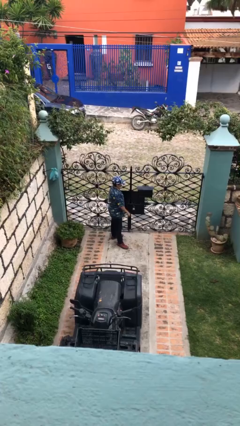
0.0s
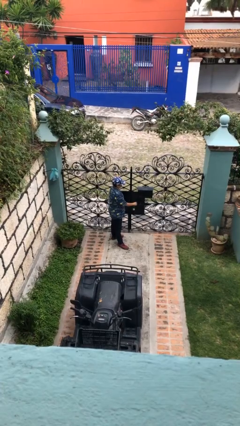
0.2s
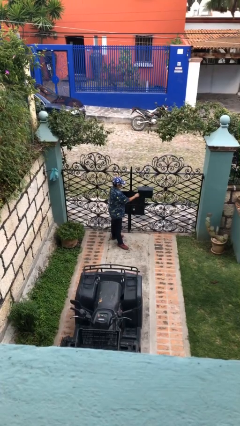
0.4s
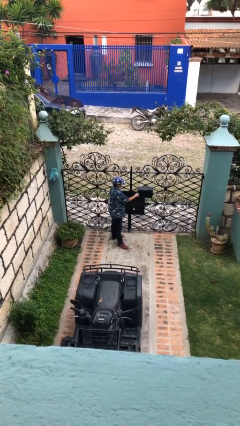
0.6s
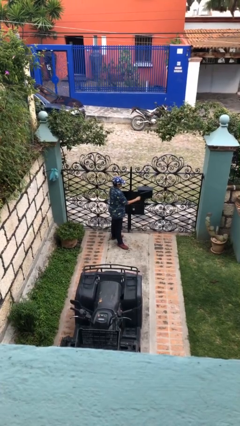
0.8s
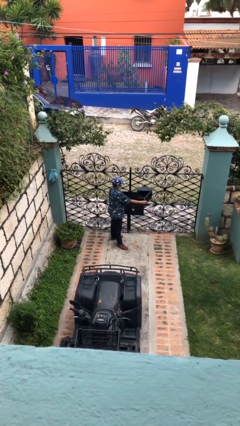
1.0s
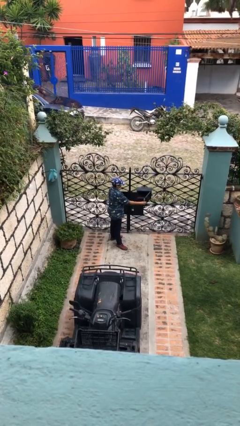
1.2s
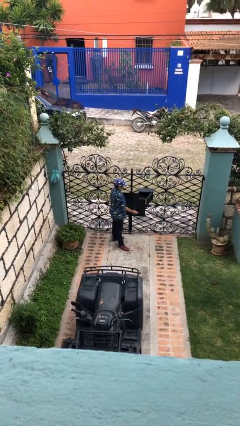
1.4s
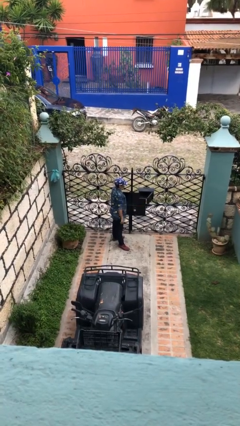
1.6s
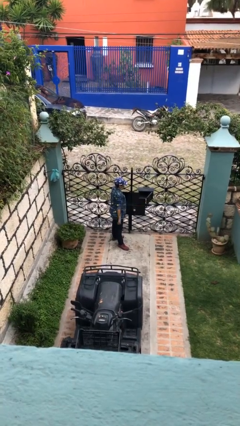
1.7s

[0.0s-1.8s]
person opens mailbox

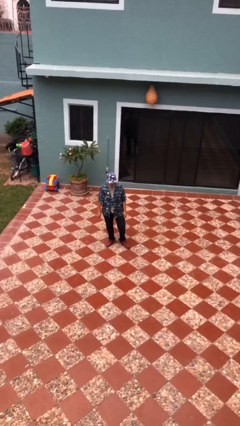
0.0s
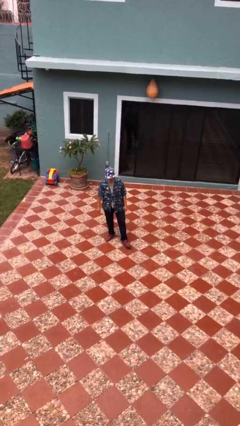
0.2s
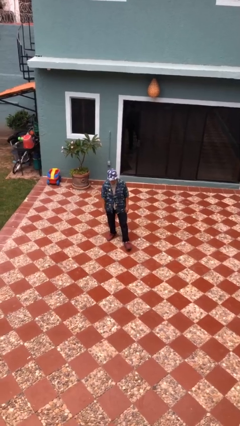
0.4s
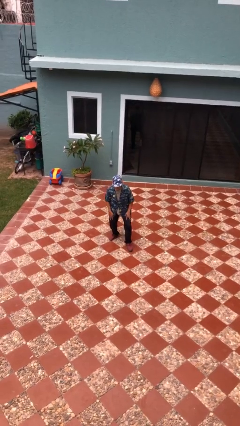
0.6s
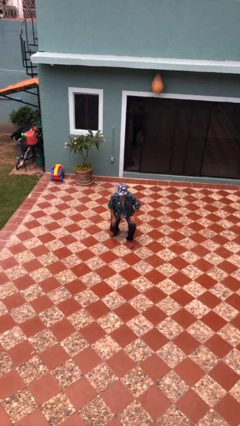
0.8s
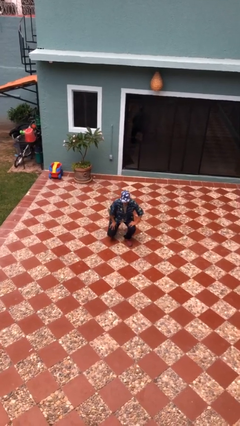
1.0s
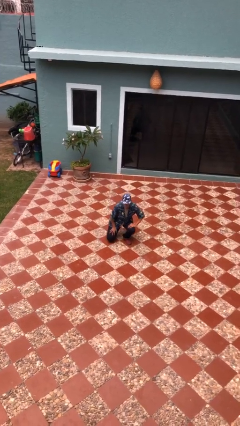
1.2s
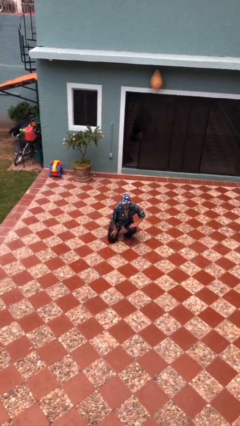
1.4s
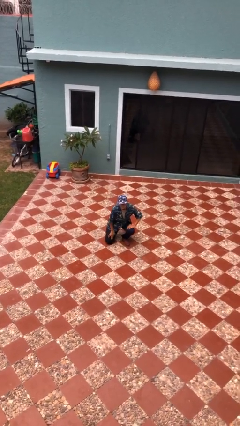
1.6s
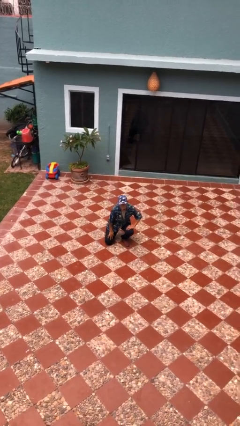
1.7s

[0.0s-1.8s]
person kneels

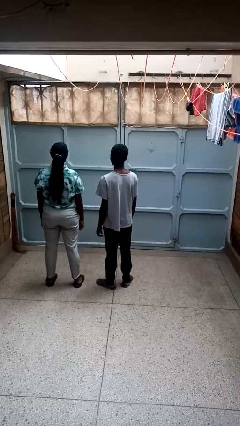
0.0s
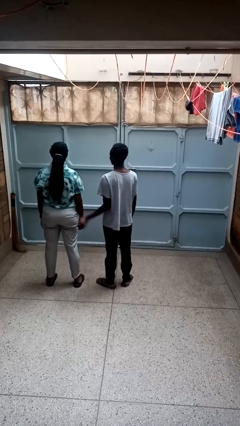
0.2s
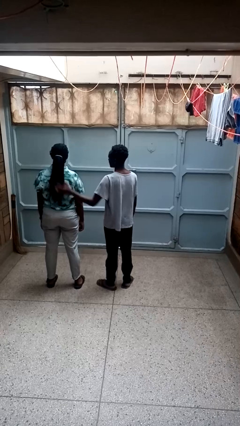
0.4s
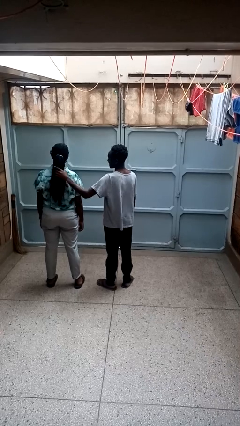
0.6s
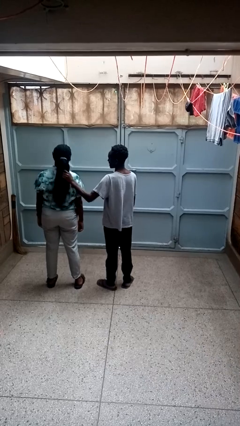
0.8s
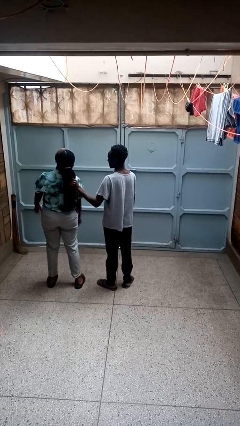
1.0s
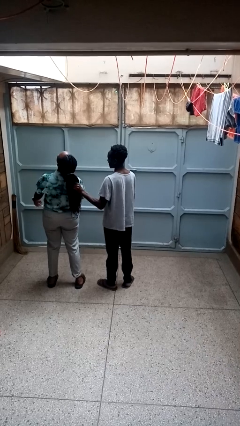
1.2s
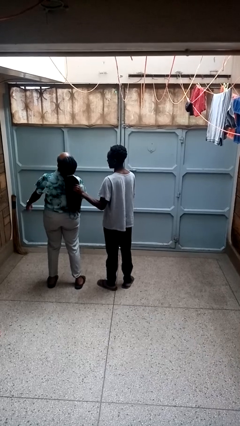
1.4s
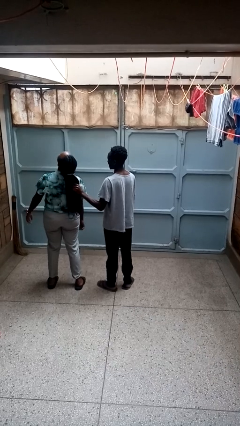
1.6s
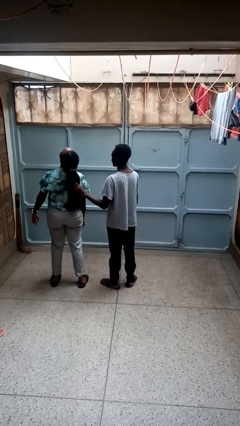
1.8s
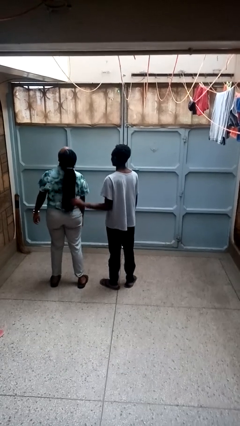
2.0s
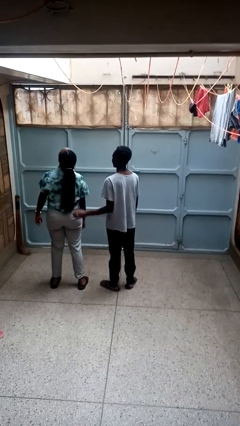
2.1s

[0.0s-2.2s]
person grabs person by hair

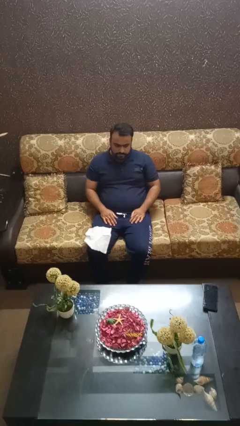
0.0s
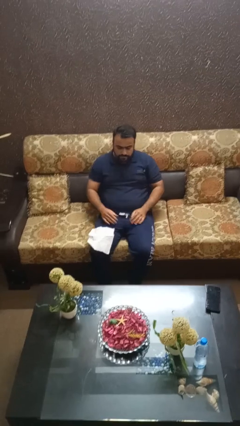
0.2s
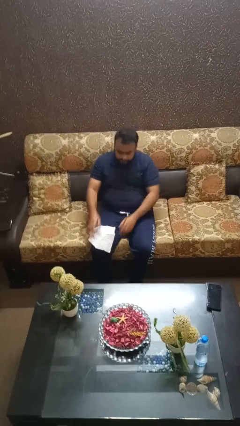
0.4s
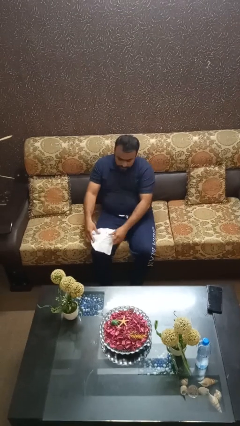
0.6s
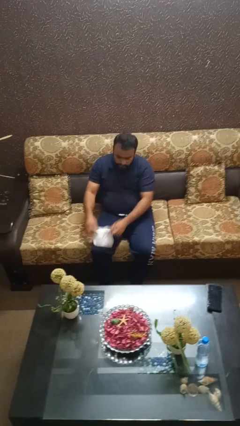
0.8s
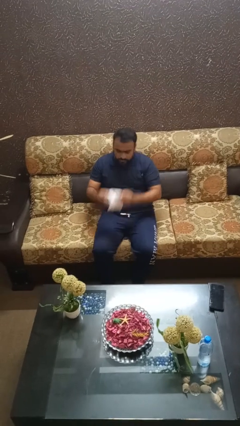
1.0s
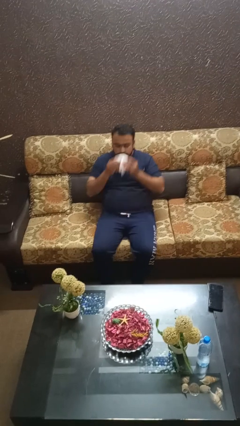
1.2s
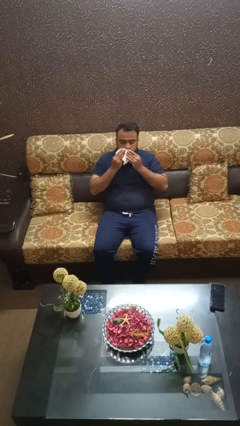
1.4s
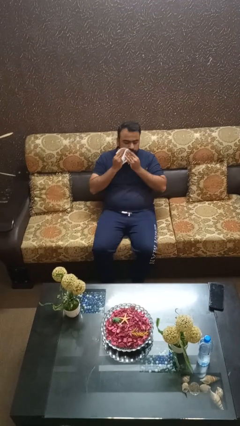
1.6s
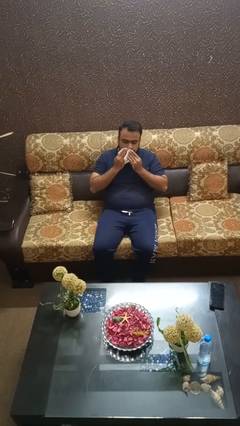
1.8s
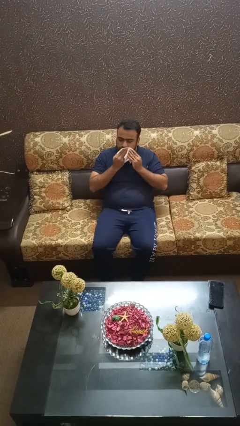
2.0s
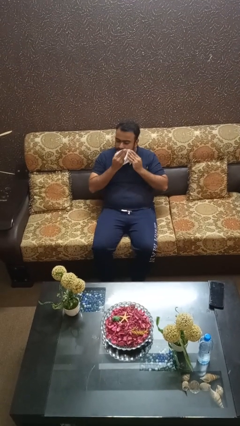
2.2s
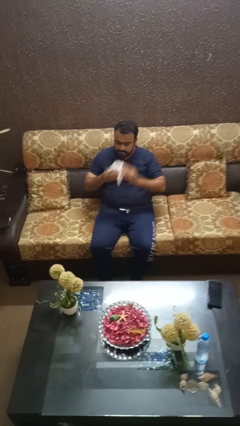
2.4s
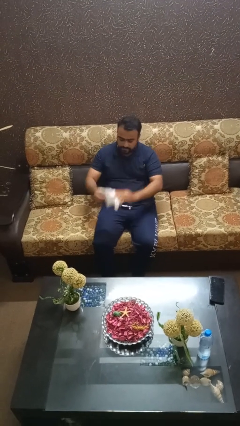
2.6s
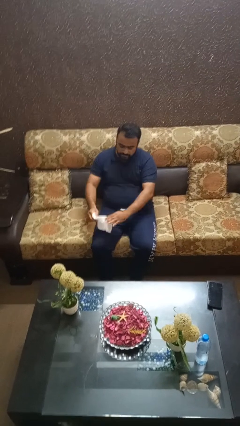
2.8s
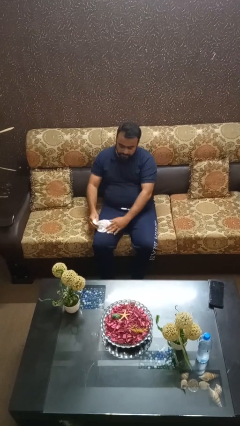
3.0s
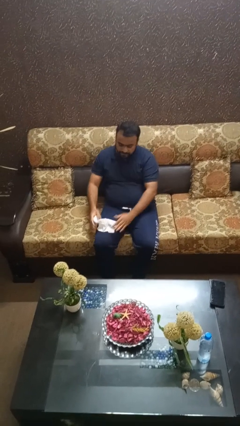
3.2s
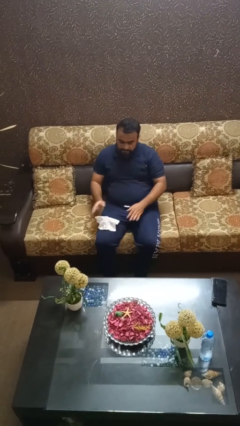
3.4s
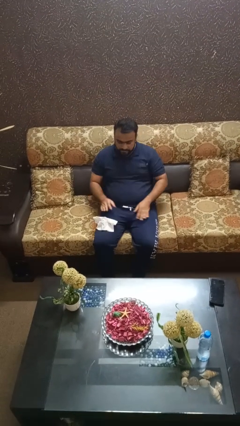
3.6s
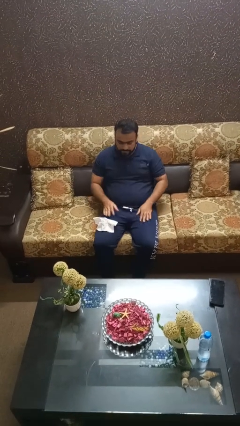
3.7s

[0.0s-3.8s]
person wipes mouth with napkin

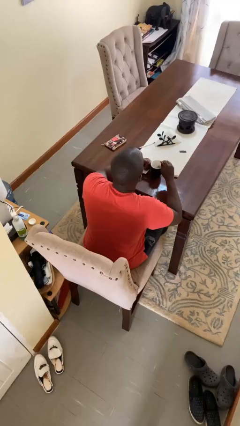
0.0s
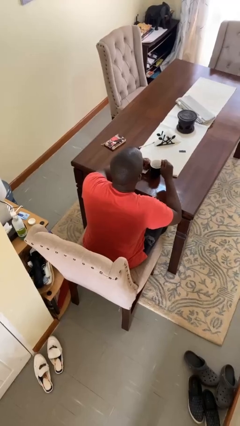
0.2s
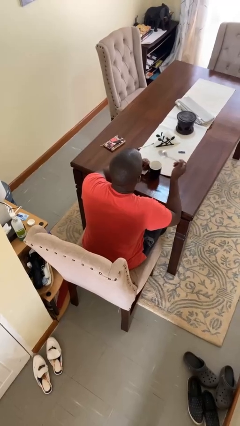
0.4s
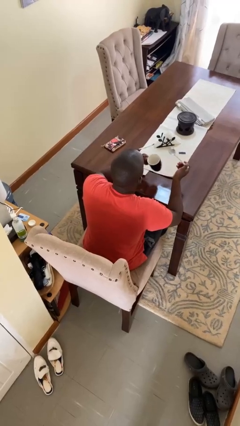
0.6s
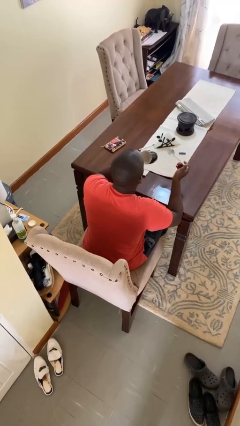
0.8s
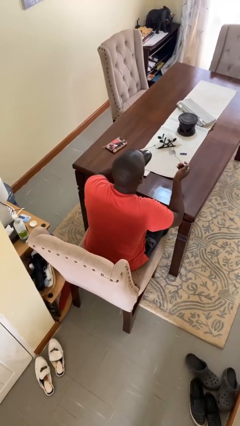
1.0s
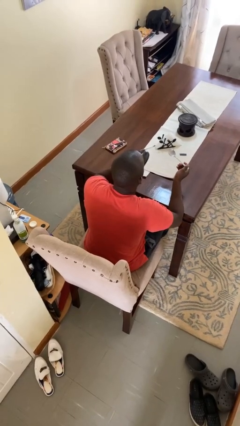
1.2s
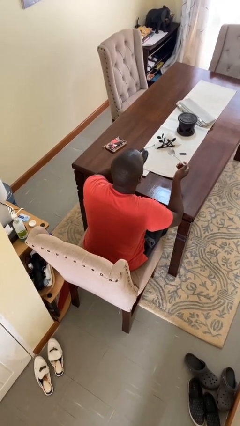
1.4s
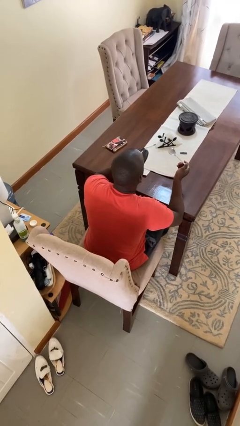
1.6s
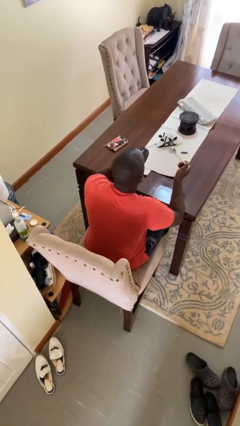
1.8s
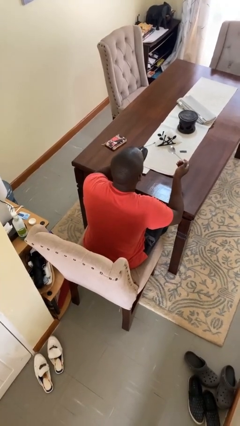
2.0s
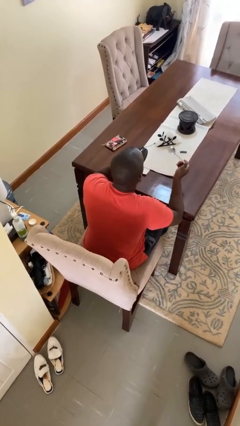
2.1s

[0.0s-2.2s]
person drinks from mug

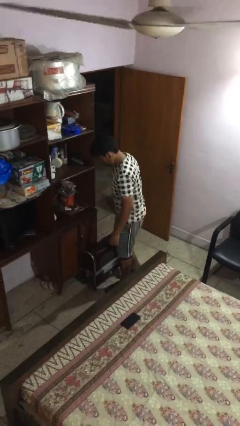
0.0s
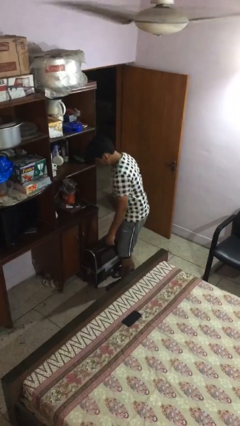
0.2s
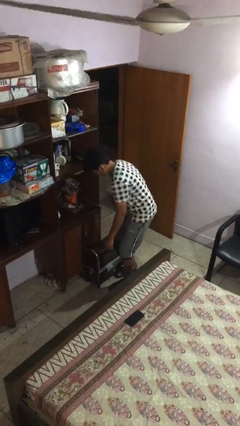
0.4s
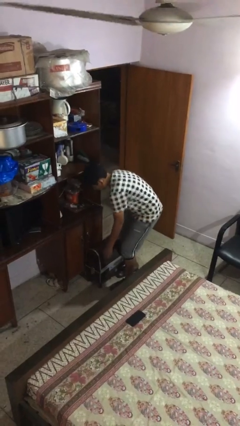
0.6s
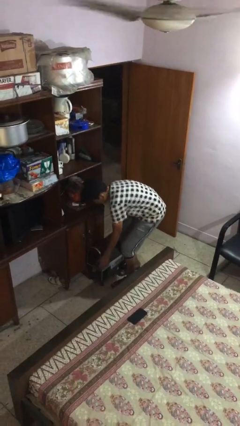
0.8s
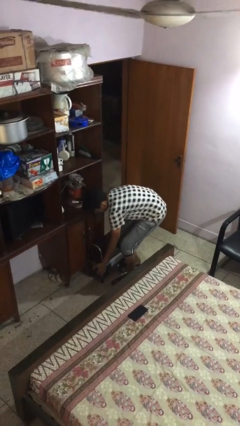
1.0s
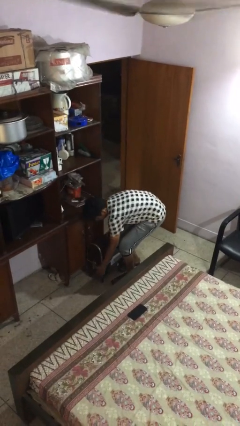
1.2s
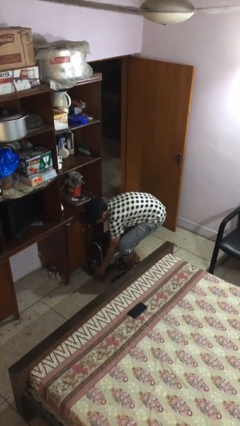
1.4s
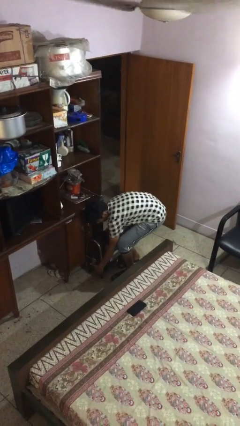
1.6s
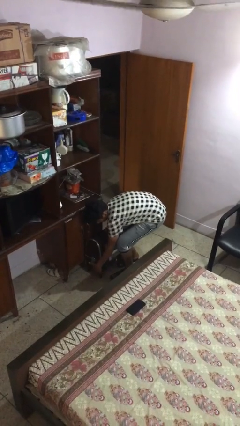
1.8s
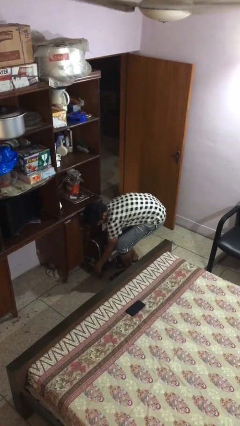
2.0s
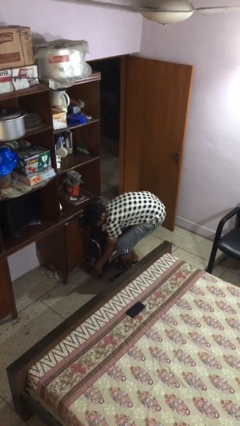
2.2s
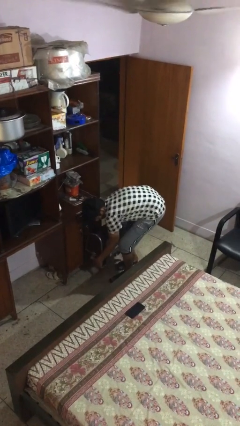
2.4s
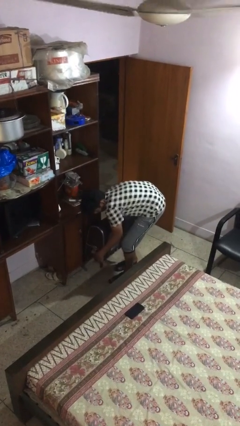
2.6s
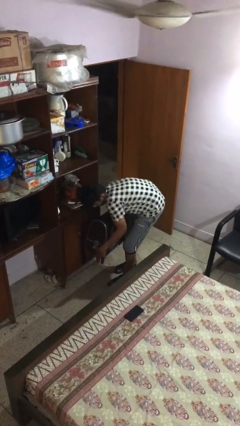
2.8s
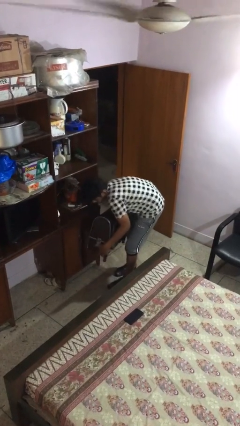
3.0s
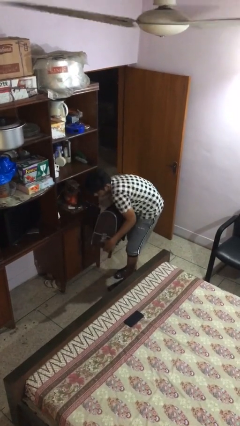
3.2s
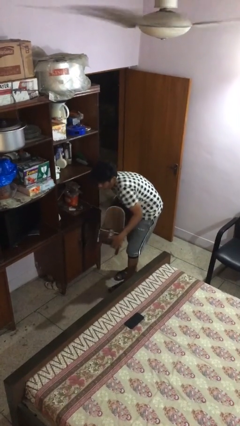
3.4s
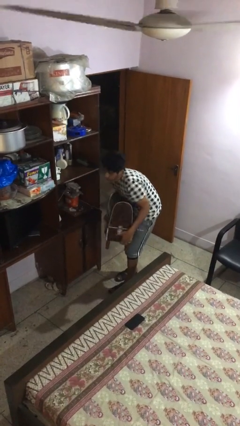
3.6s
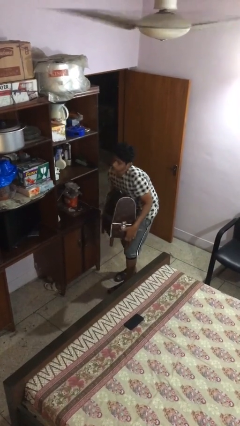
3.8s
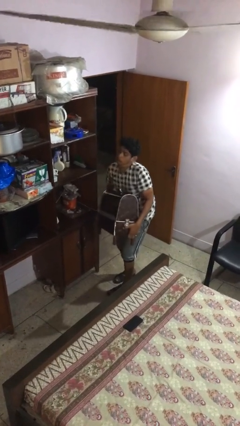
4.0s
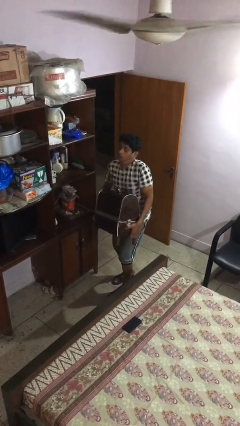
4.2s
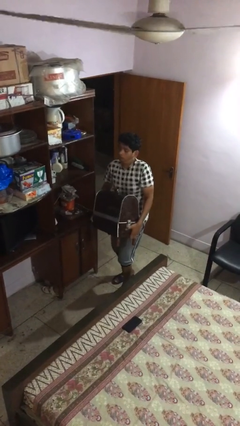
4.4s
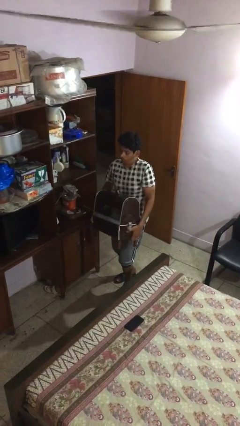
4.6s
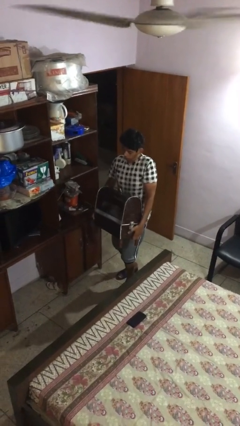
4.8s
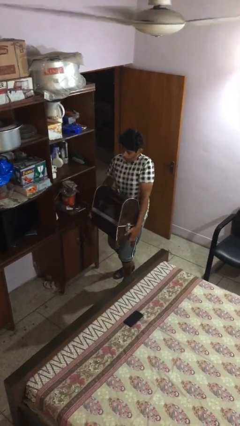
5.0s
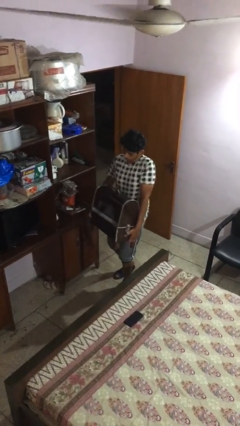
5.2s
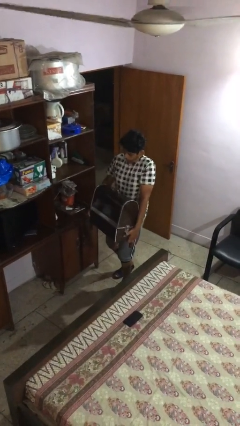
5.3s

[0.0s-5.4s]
person picks up object from floor

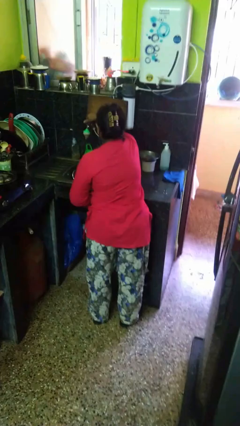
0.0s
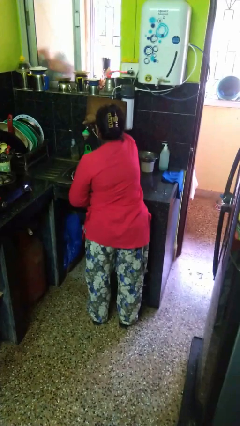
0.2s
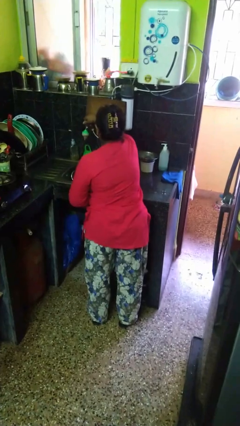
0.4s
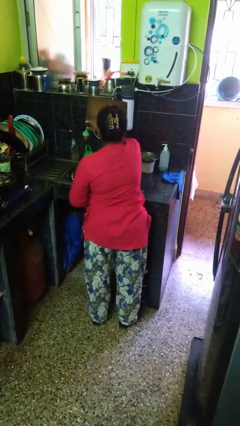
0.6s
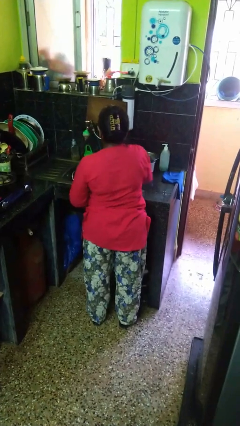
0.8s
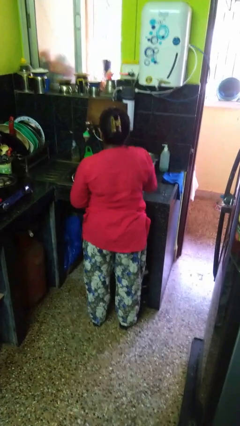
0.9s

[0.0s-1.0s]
person turns off faucet
